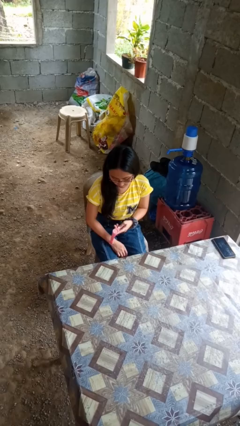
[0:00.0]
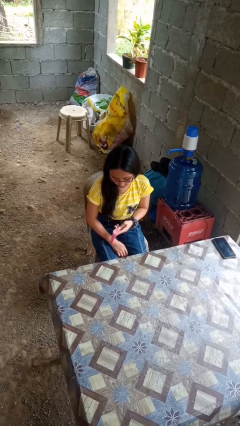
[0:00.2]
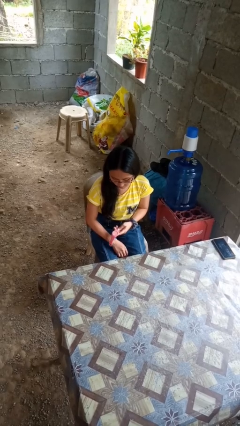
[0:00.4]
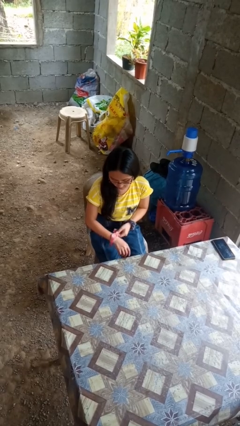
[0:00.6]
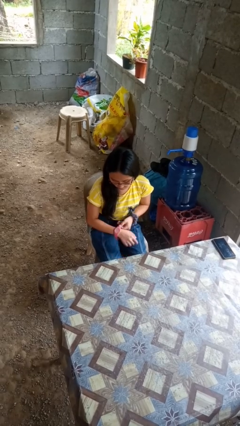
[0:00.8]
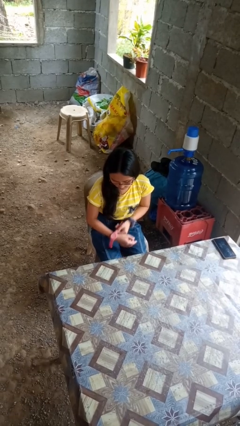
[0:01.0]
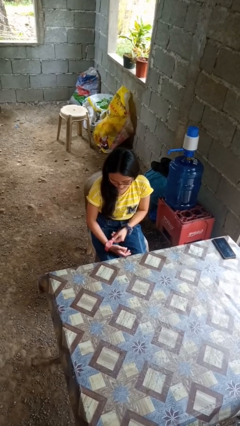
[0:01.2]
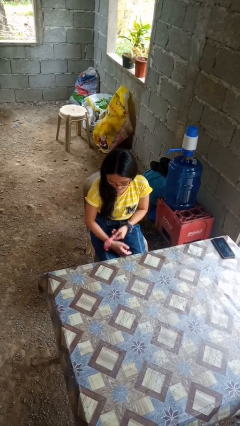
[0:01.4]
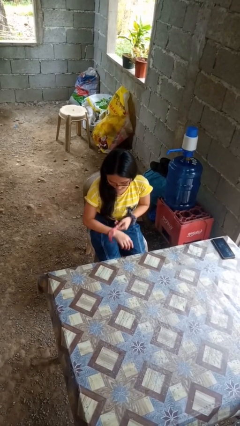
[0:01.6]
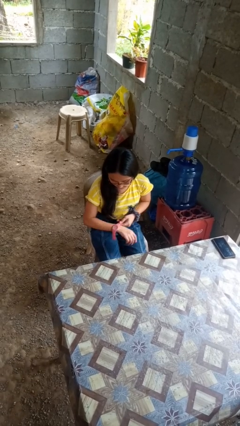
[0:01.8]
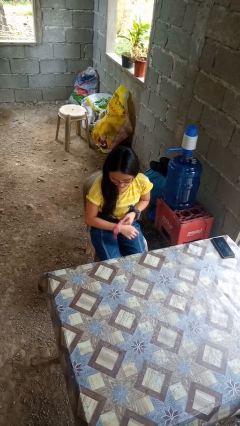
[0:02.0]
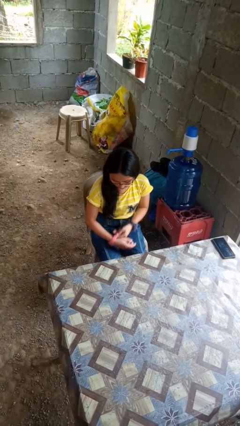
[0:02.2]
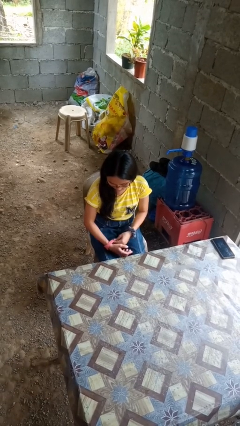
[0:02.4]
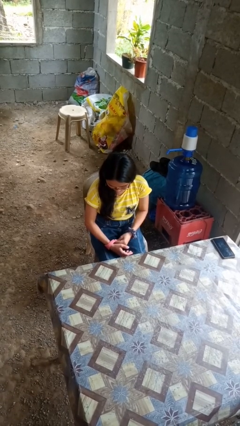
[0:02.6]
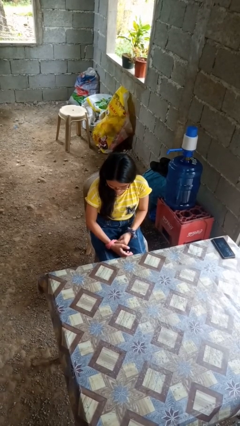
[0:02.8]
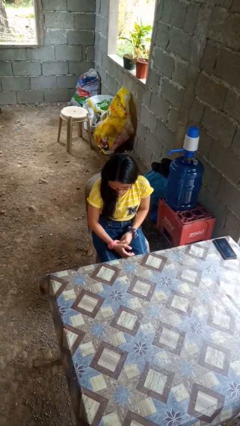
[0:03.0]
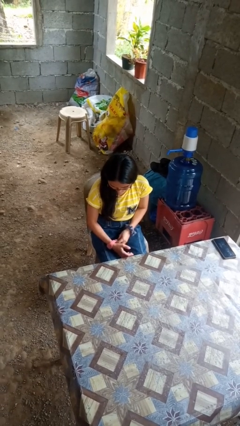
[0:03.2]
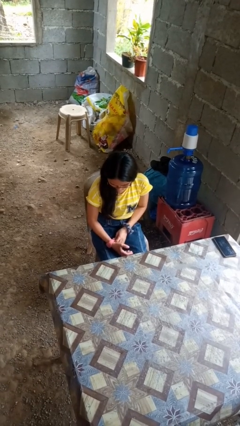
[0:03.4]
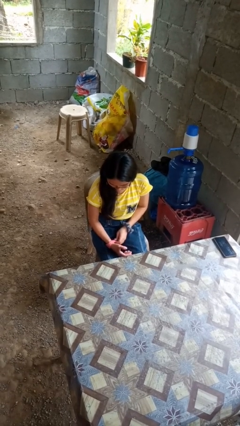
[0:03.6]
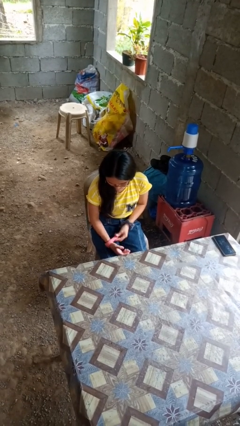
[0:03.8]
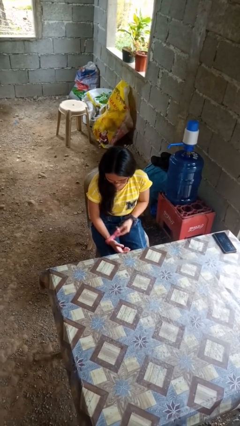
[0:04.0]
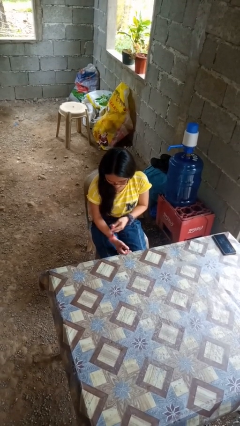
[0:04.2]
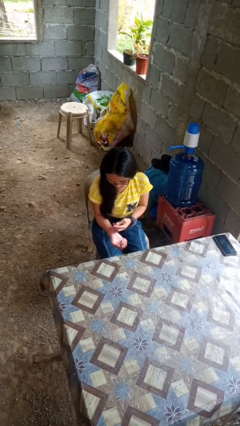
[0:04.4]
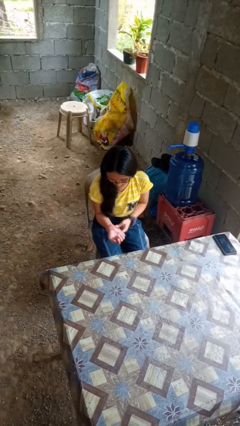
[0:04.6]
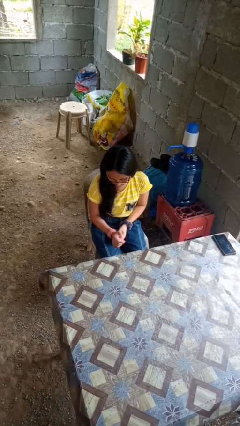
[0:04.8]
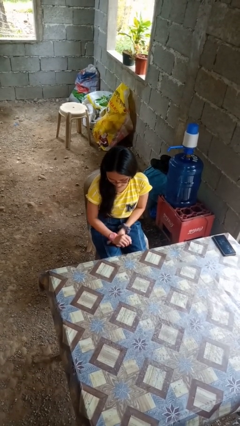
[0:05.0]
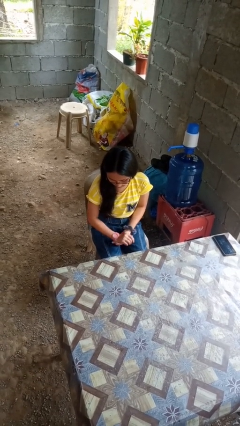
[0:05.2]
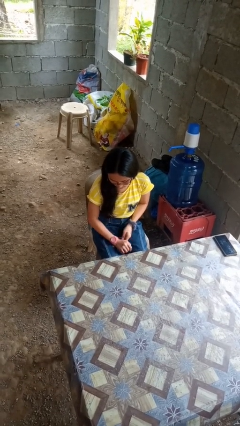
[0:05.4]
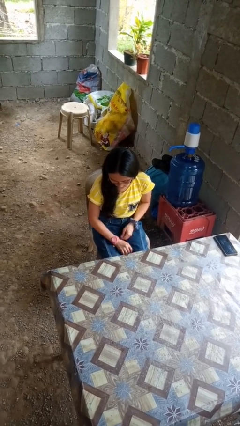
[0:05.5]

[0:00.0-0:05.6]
person puts on wristwatch

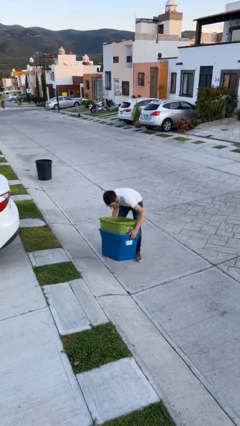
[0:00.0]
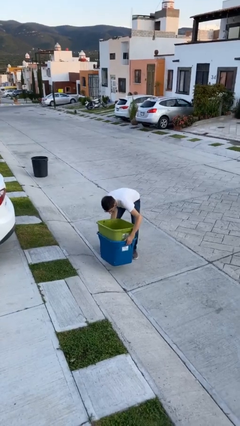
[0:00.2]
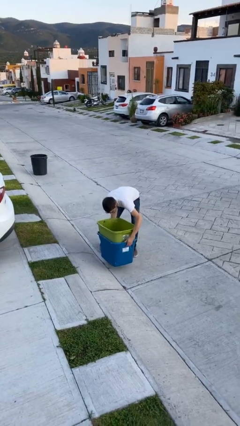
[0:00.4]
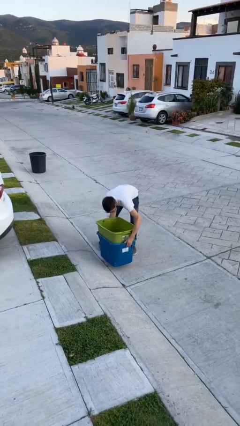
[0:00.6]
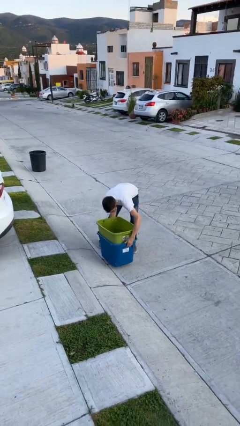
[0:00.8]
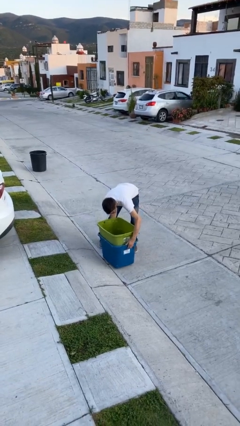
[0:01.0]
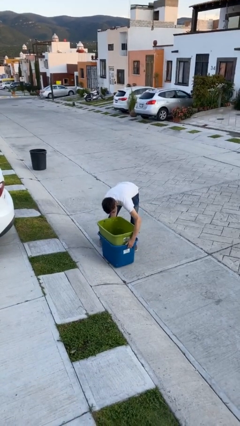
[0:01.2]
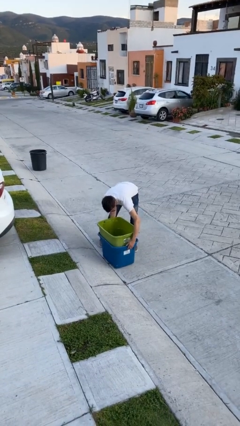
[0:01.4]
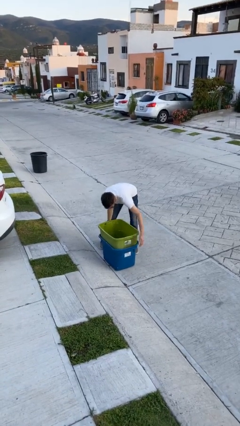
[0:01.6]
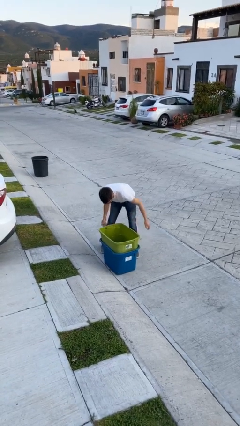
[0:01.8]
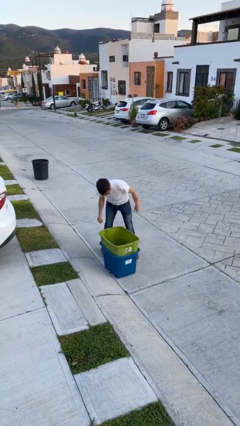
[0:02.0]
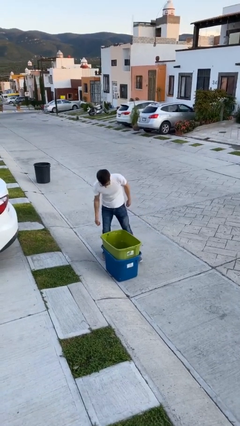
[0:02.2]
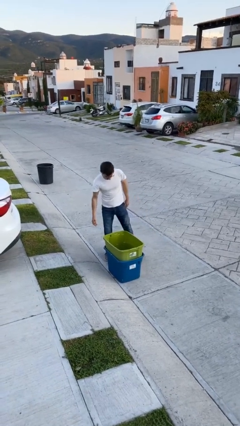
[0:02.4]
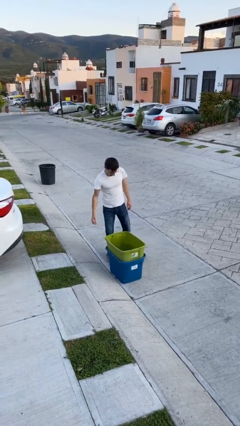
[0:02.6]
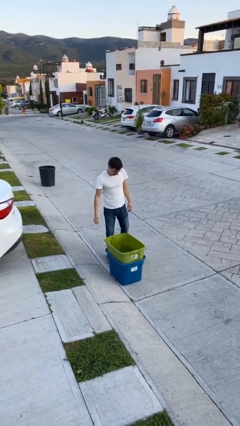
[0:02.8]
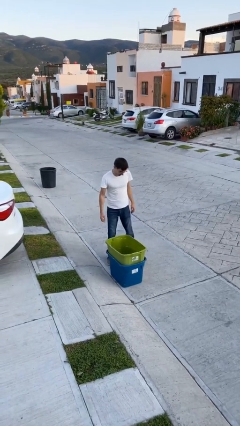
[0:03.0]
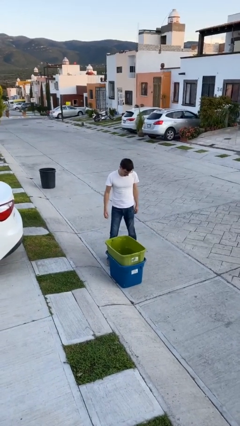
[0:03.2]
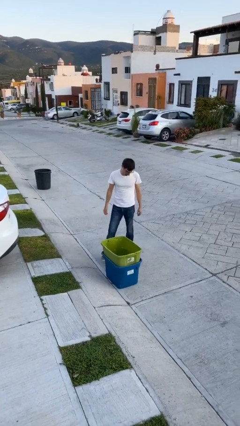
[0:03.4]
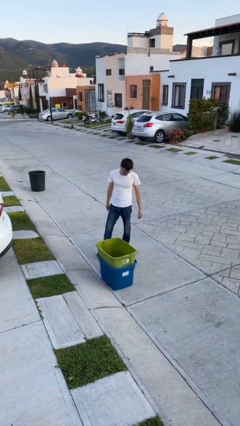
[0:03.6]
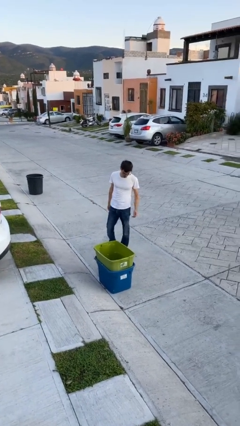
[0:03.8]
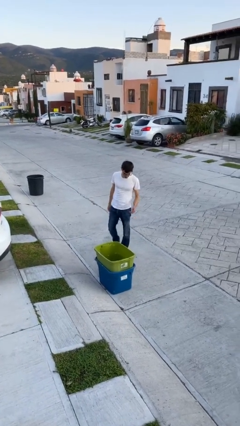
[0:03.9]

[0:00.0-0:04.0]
person puts down object on floor

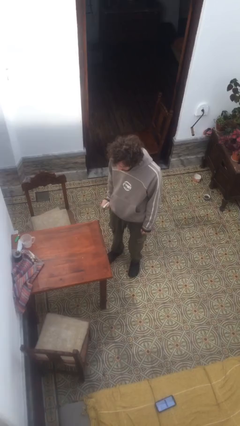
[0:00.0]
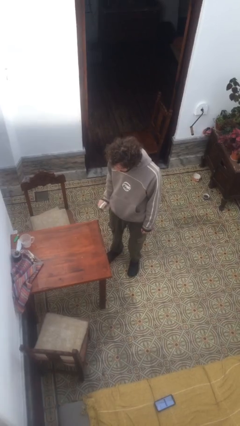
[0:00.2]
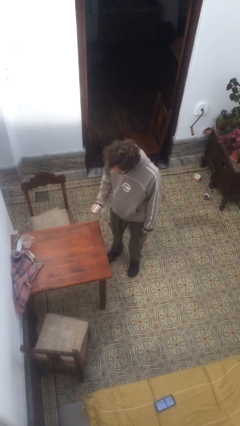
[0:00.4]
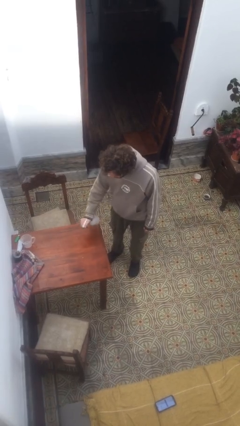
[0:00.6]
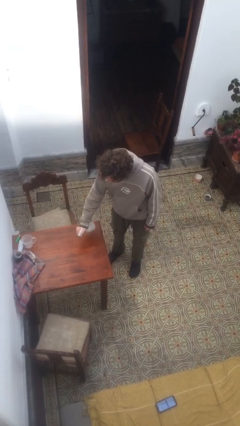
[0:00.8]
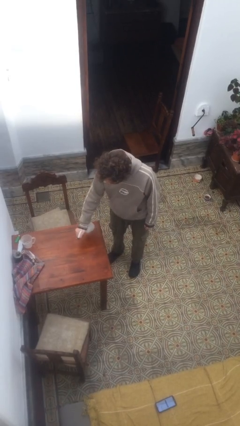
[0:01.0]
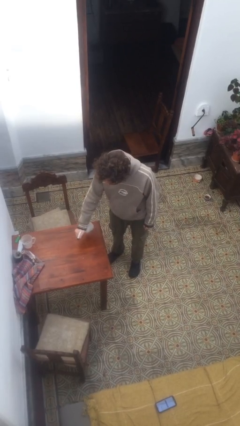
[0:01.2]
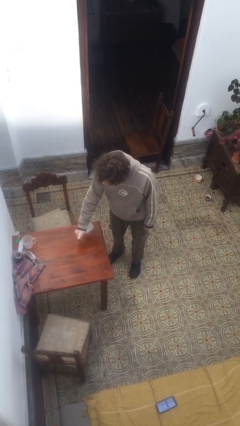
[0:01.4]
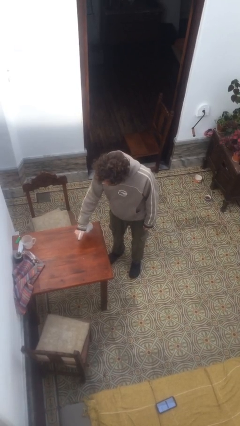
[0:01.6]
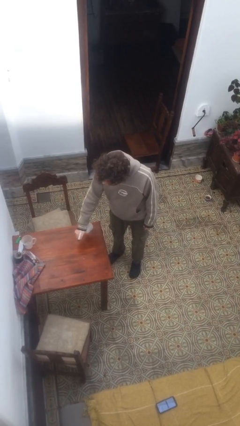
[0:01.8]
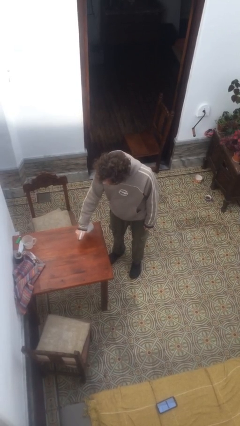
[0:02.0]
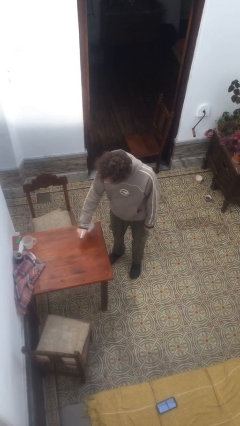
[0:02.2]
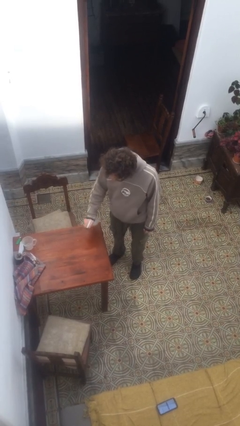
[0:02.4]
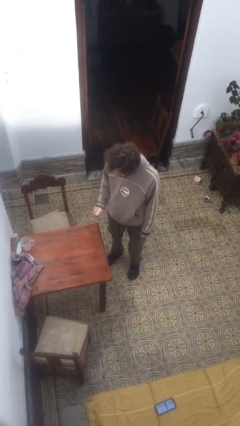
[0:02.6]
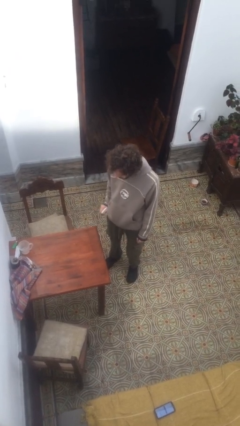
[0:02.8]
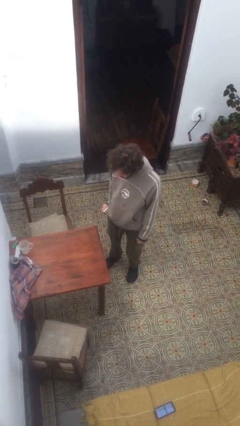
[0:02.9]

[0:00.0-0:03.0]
person sprays from bottle

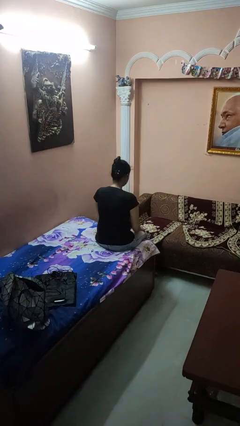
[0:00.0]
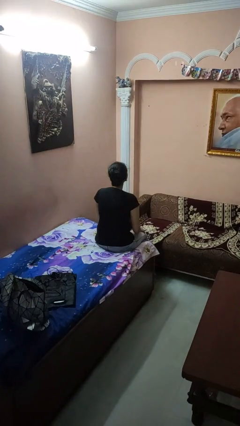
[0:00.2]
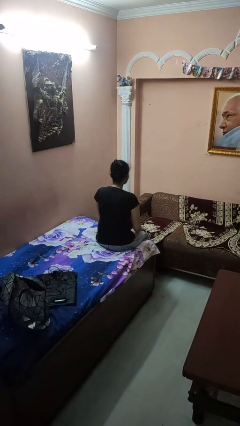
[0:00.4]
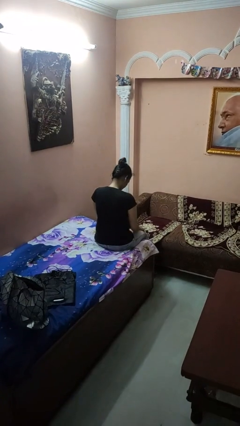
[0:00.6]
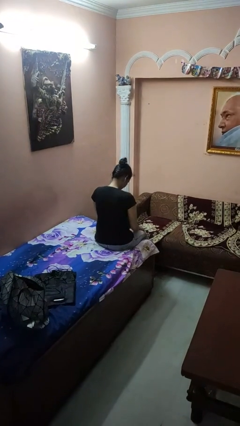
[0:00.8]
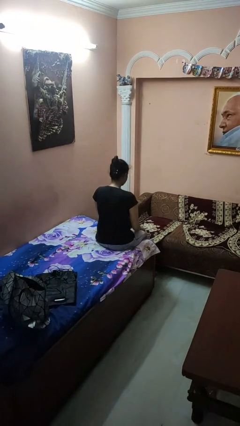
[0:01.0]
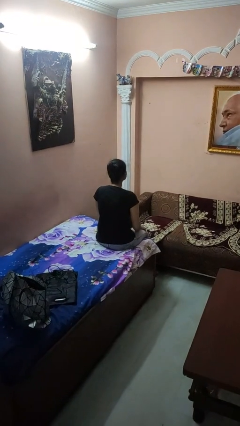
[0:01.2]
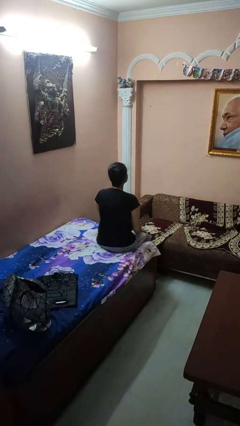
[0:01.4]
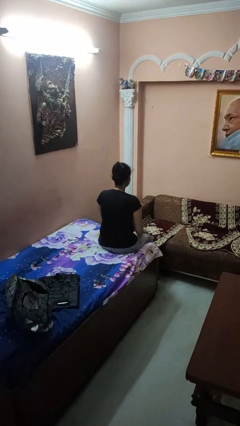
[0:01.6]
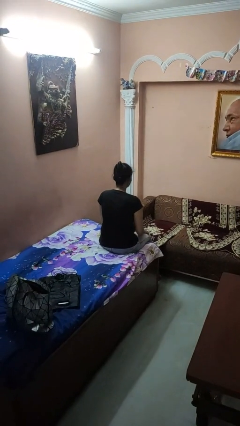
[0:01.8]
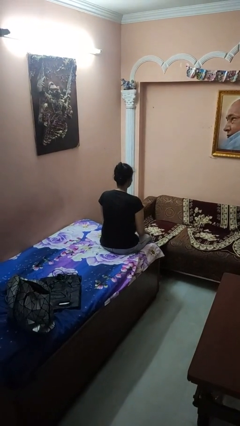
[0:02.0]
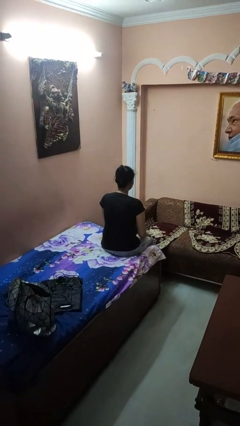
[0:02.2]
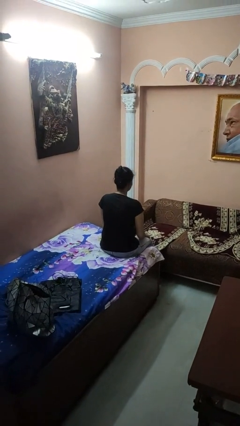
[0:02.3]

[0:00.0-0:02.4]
person nods head

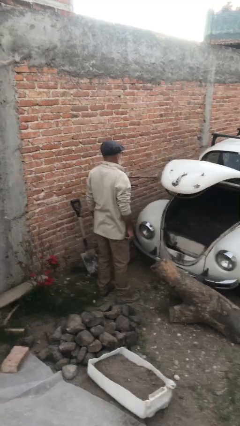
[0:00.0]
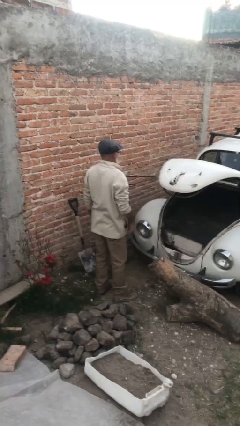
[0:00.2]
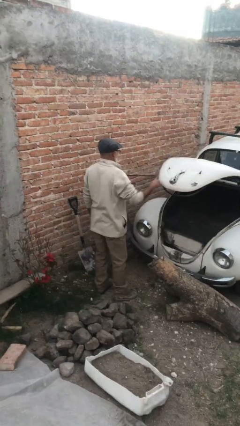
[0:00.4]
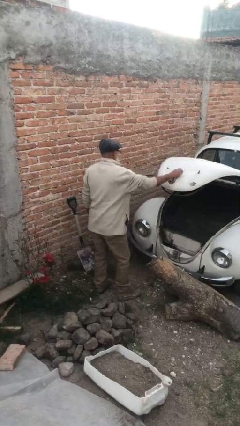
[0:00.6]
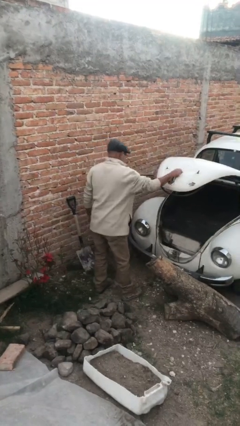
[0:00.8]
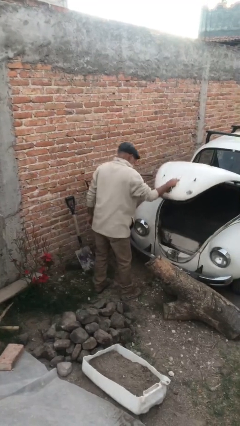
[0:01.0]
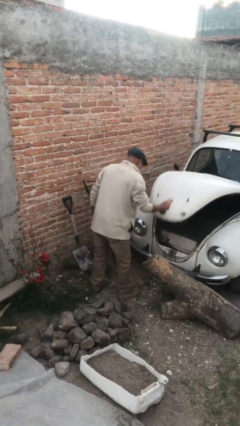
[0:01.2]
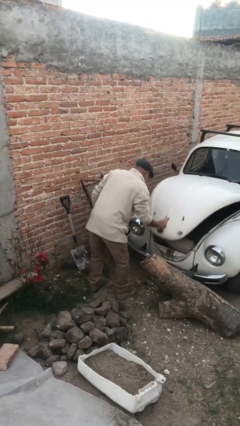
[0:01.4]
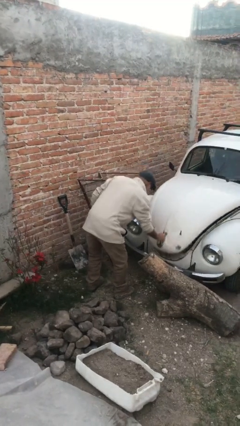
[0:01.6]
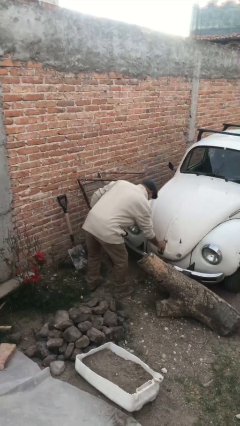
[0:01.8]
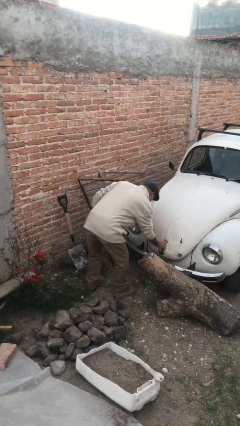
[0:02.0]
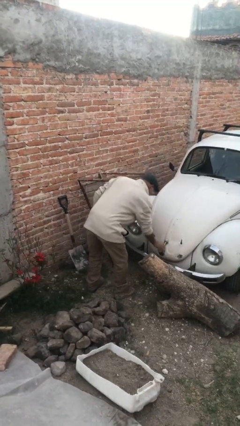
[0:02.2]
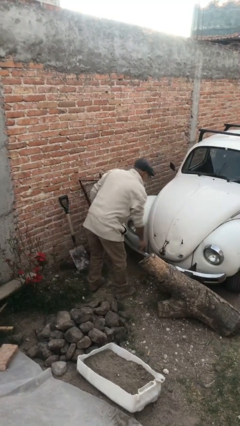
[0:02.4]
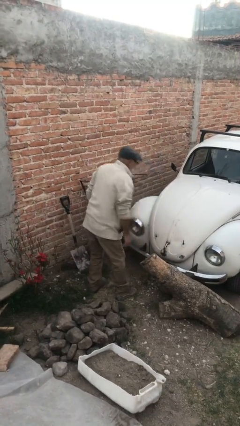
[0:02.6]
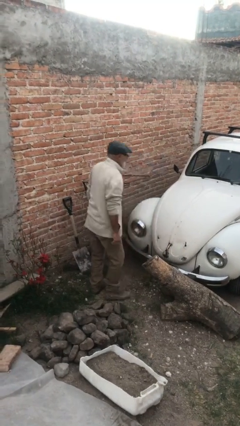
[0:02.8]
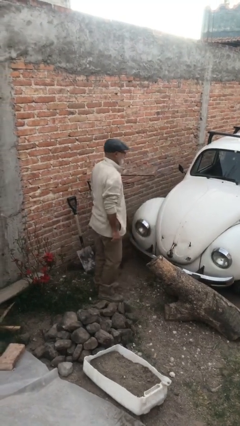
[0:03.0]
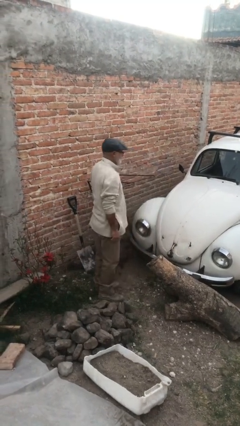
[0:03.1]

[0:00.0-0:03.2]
person closes car trunk
